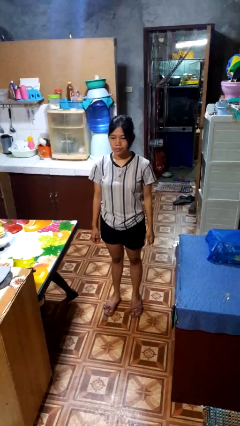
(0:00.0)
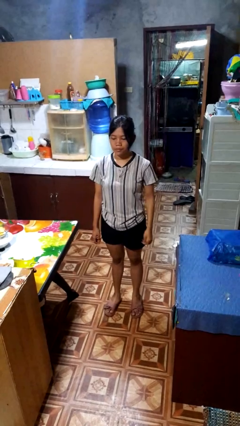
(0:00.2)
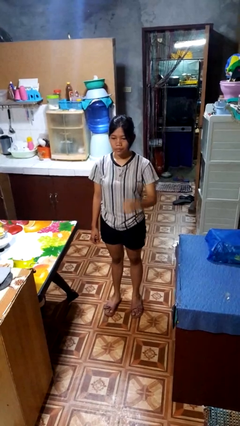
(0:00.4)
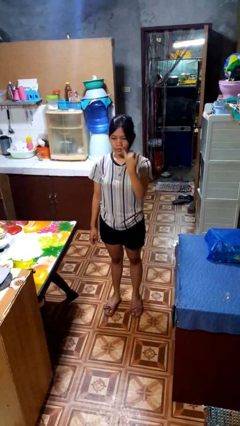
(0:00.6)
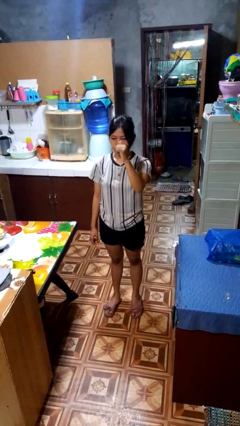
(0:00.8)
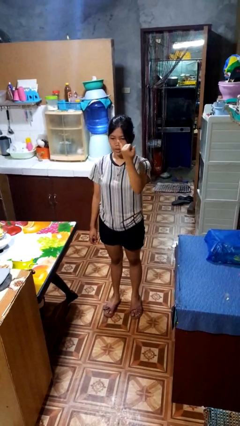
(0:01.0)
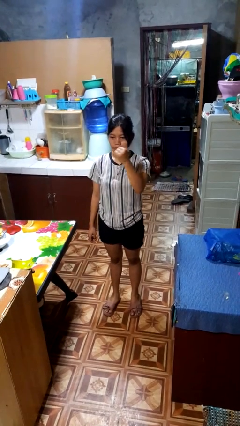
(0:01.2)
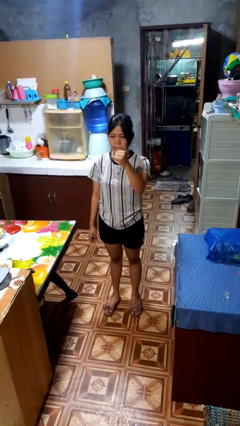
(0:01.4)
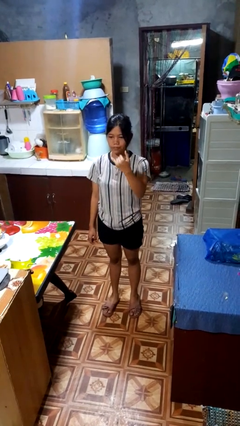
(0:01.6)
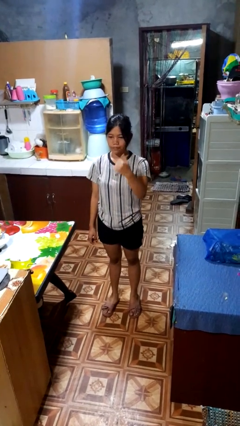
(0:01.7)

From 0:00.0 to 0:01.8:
person gestures hang loose

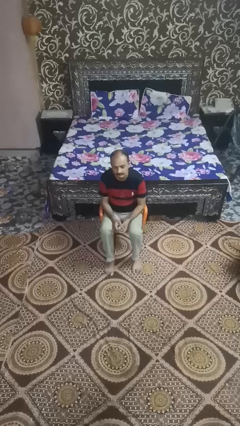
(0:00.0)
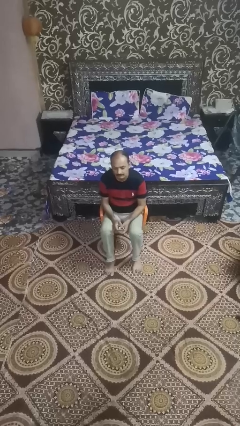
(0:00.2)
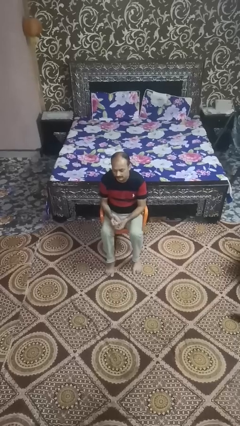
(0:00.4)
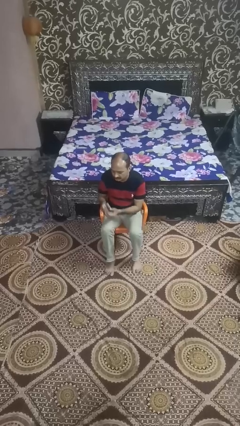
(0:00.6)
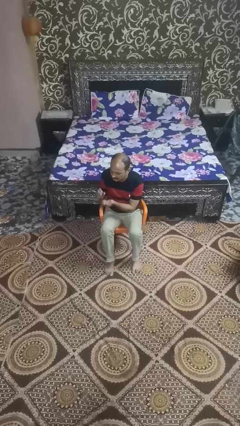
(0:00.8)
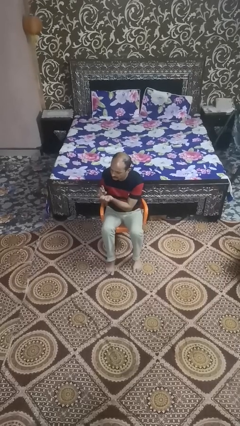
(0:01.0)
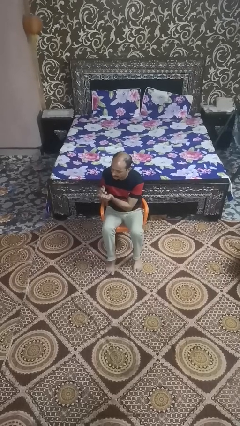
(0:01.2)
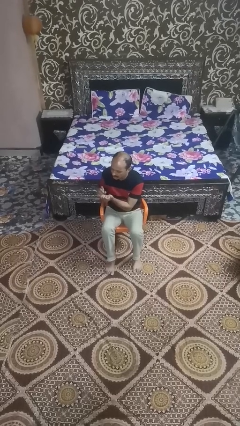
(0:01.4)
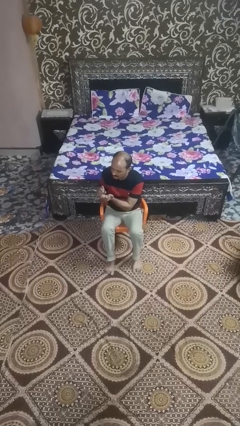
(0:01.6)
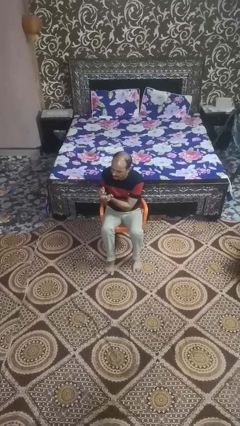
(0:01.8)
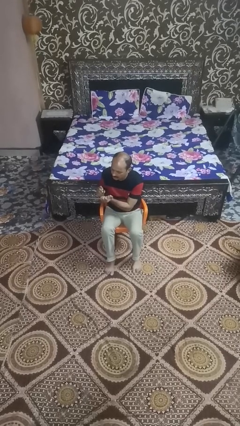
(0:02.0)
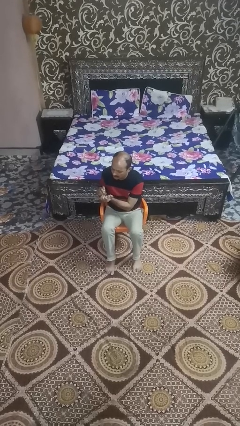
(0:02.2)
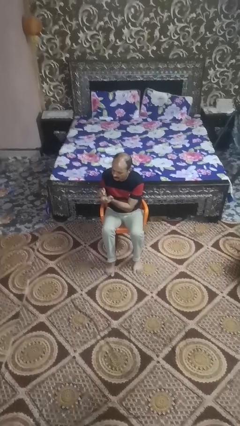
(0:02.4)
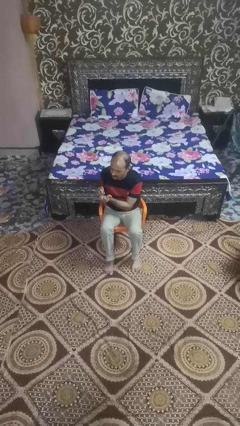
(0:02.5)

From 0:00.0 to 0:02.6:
person clips fingernails

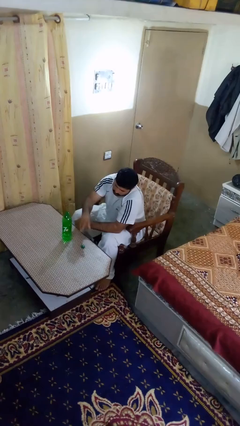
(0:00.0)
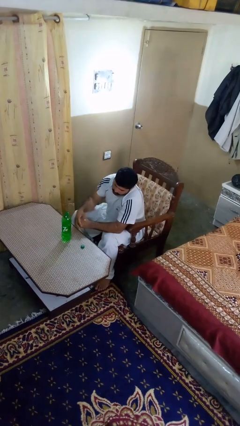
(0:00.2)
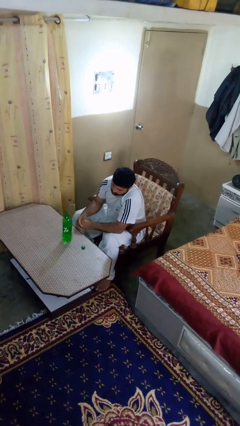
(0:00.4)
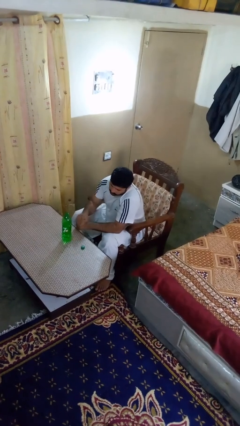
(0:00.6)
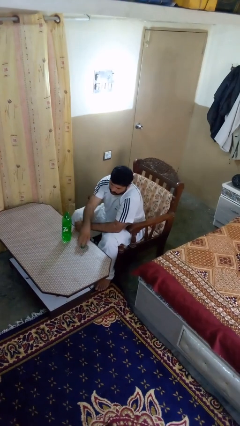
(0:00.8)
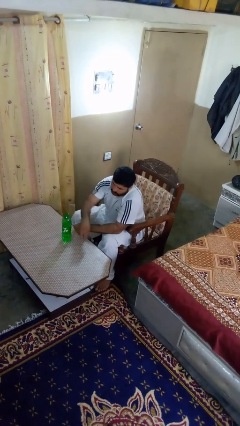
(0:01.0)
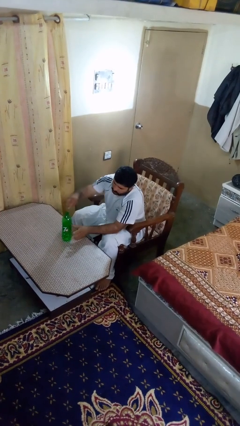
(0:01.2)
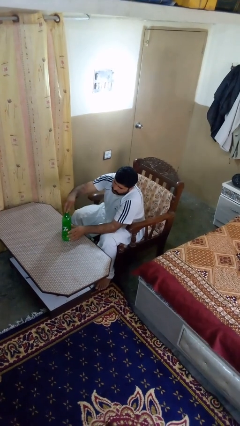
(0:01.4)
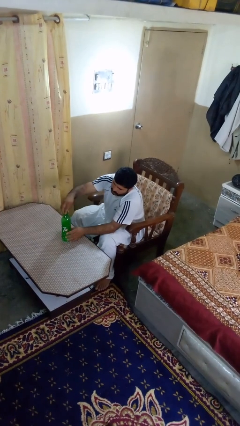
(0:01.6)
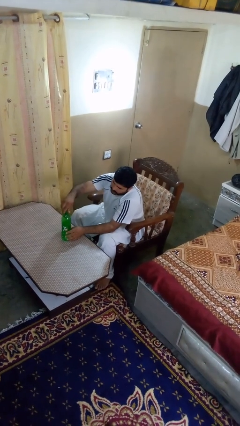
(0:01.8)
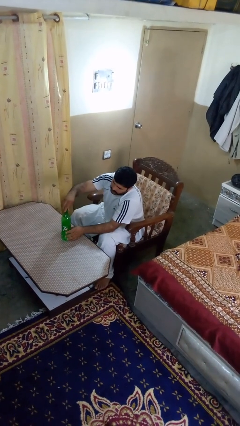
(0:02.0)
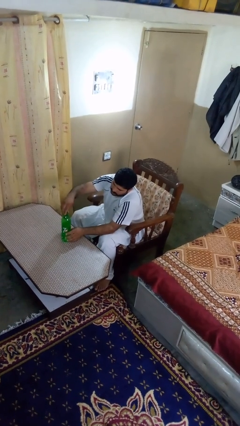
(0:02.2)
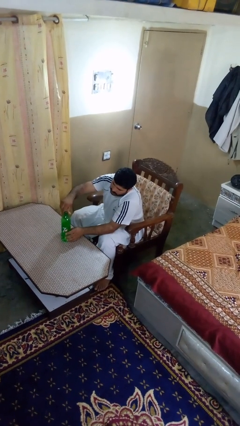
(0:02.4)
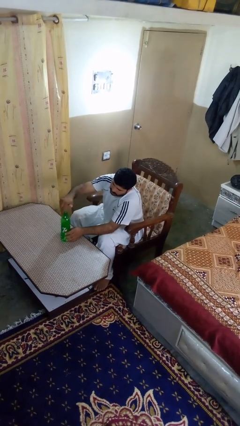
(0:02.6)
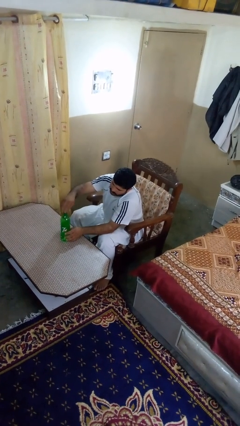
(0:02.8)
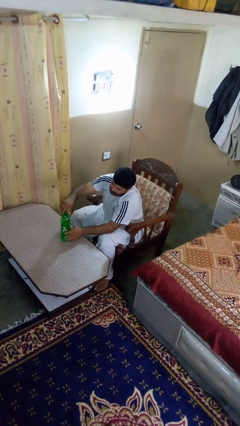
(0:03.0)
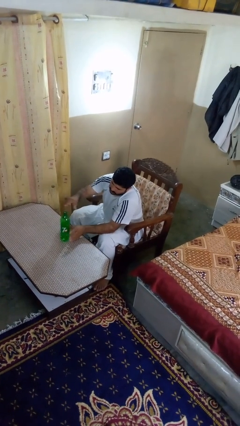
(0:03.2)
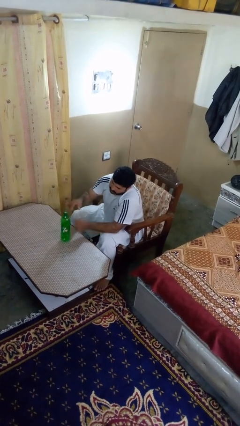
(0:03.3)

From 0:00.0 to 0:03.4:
person screws lid to bottle

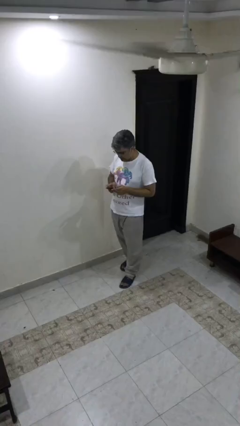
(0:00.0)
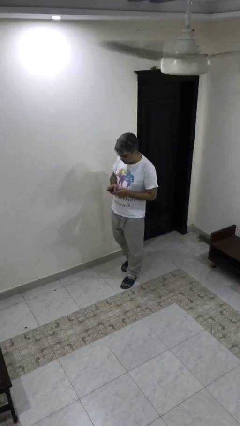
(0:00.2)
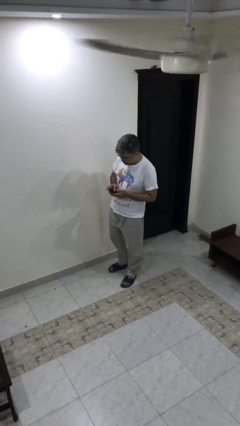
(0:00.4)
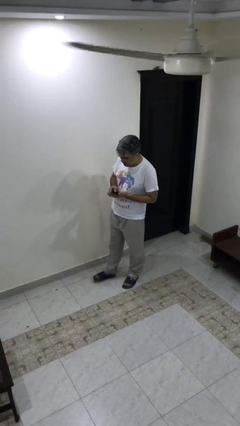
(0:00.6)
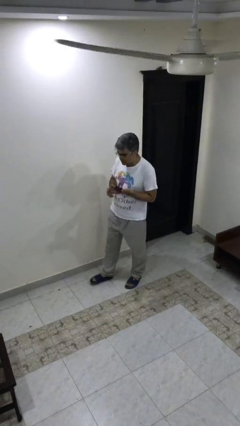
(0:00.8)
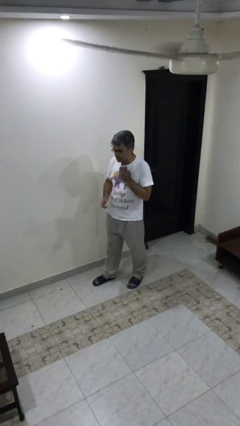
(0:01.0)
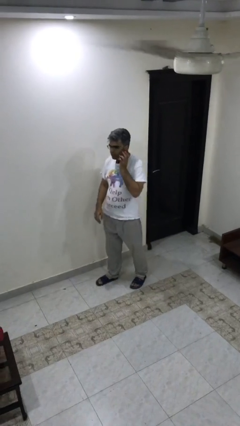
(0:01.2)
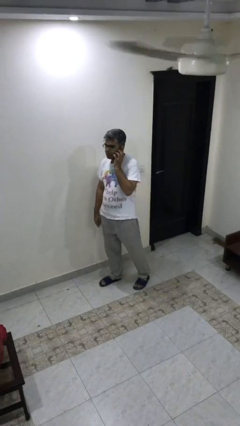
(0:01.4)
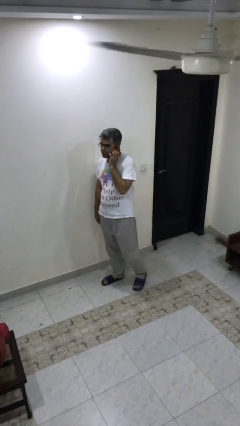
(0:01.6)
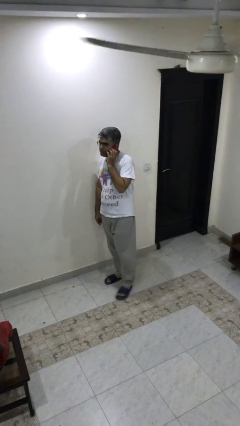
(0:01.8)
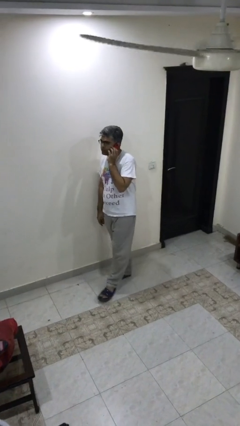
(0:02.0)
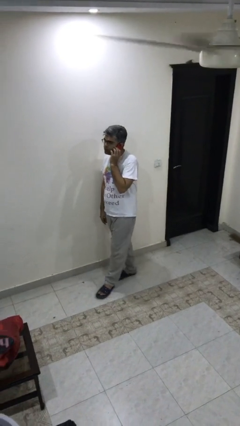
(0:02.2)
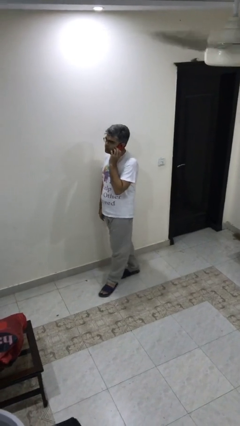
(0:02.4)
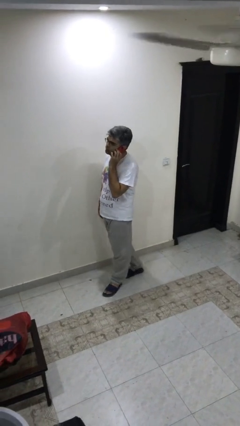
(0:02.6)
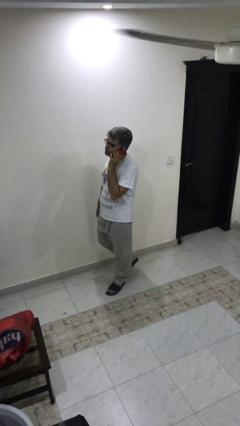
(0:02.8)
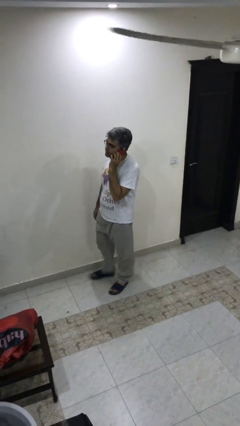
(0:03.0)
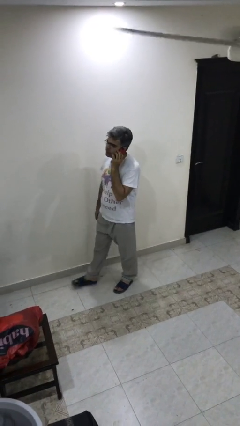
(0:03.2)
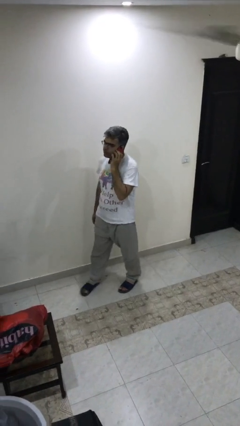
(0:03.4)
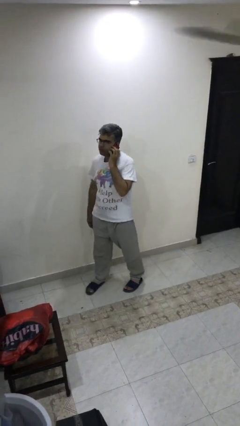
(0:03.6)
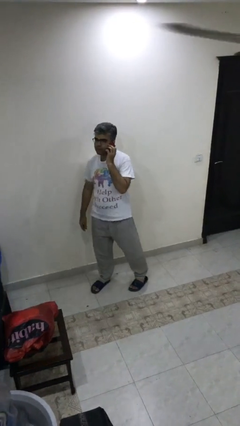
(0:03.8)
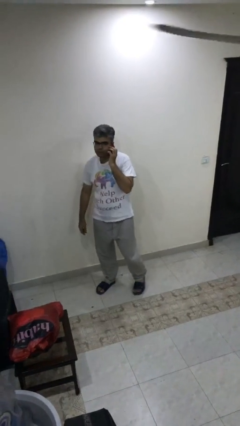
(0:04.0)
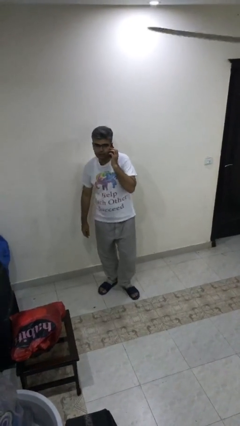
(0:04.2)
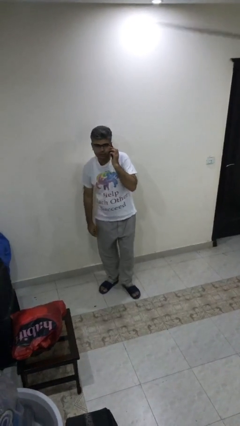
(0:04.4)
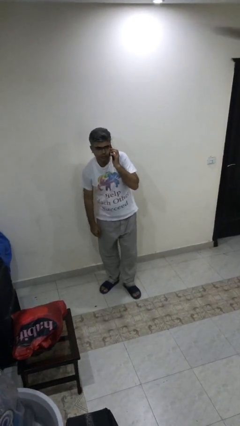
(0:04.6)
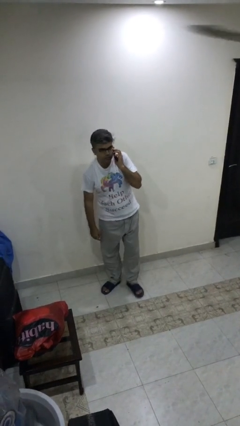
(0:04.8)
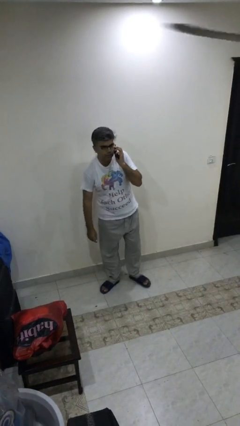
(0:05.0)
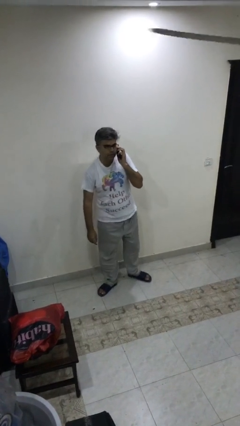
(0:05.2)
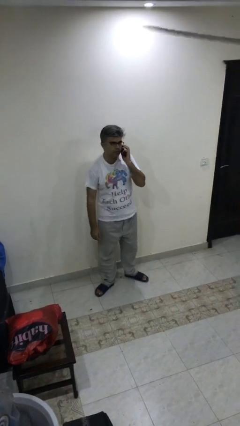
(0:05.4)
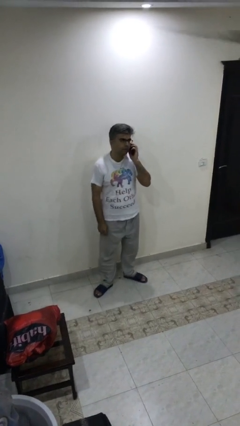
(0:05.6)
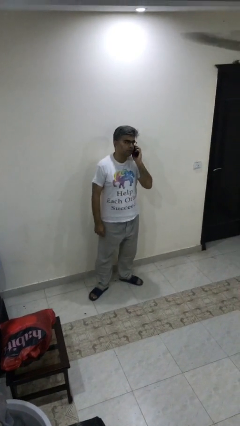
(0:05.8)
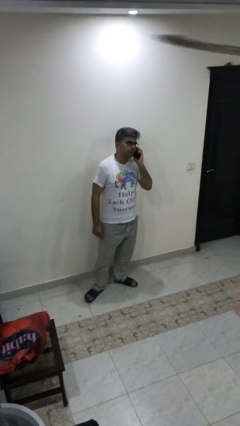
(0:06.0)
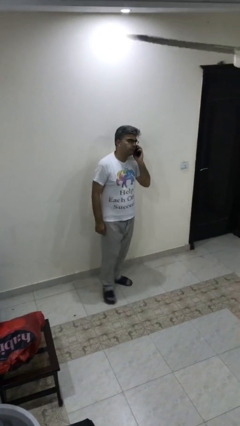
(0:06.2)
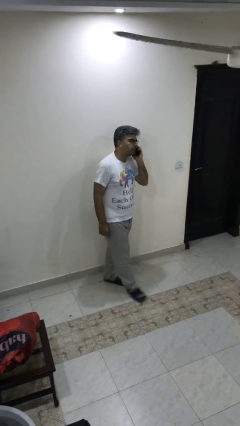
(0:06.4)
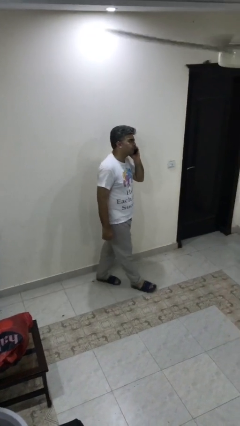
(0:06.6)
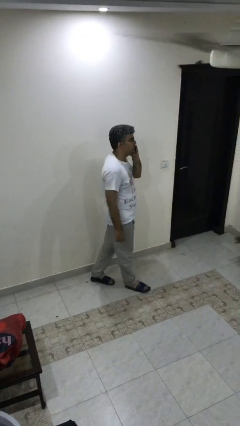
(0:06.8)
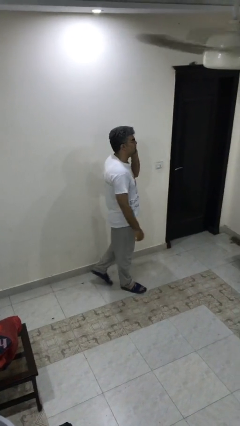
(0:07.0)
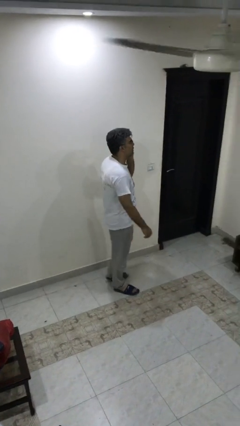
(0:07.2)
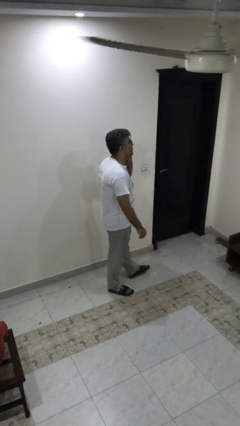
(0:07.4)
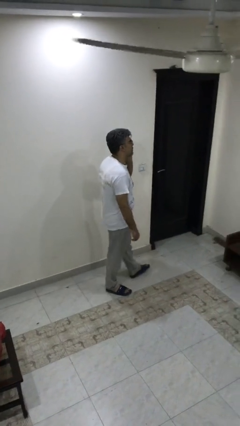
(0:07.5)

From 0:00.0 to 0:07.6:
person talks on phone

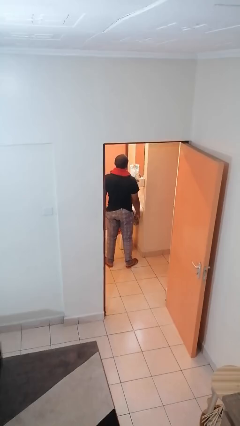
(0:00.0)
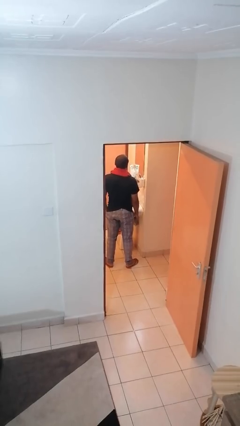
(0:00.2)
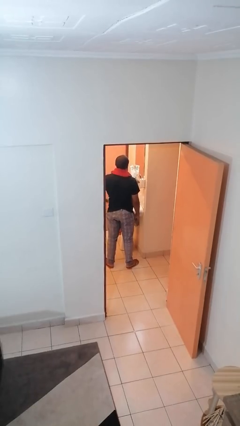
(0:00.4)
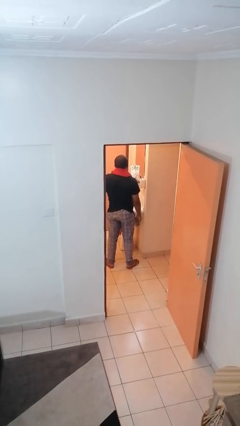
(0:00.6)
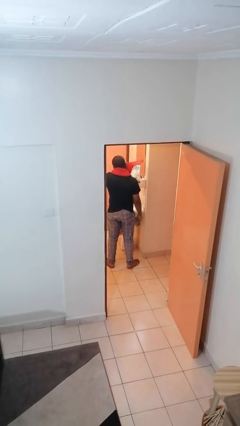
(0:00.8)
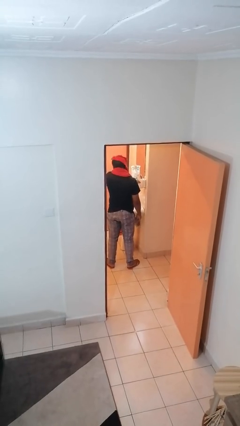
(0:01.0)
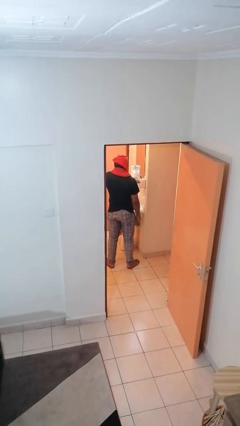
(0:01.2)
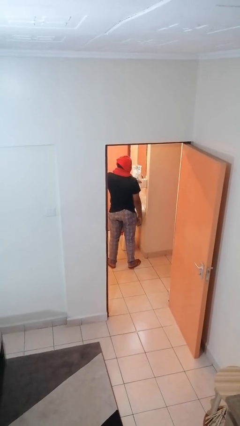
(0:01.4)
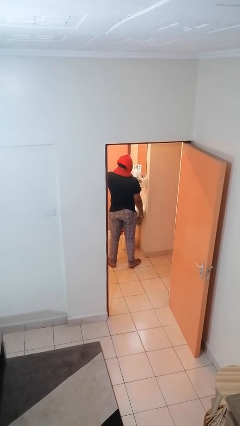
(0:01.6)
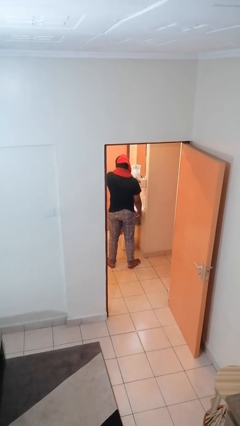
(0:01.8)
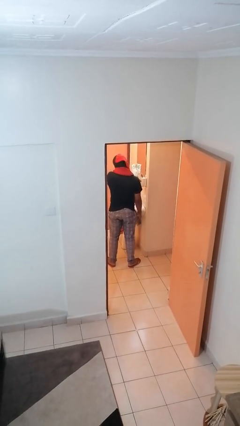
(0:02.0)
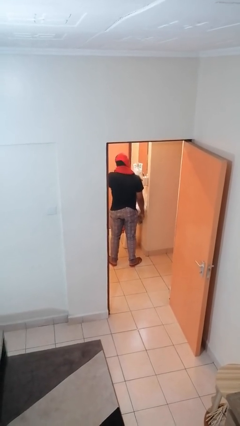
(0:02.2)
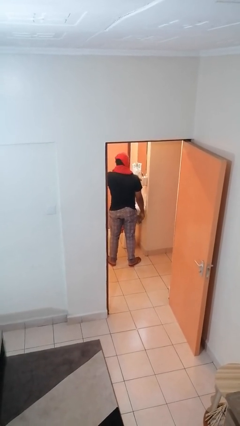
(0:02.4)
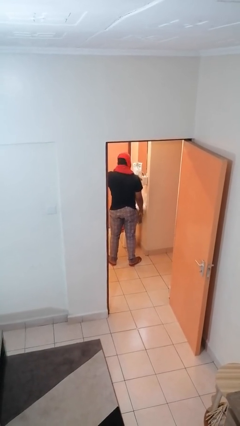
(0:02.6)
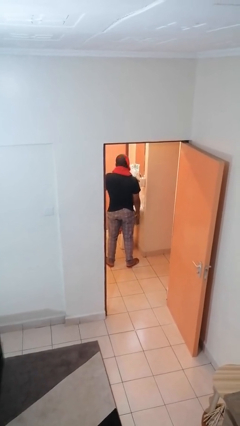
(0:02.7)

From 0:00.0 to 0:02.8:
person dries face with towel
